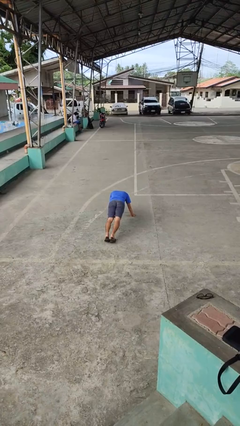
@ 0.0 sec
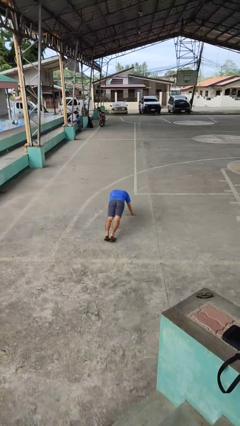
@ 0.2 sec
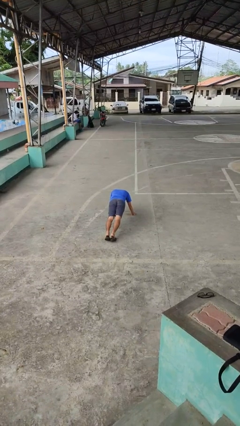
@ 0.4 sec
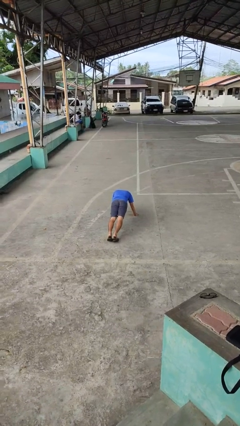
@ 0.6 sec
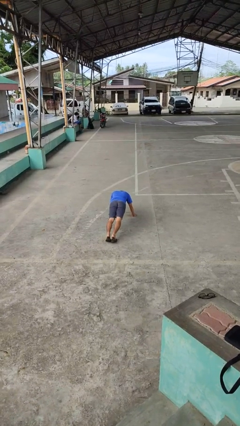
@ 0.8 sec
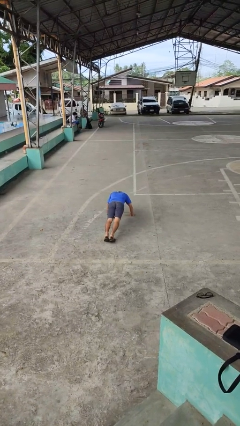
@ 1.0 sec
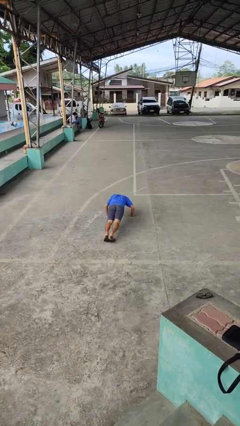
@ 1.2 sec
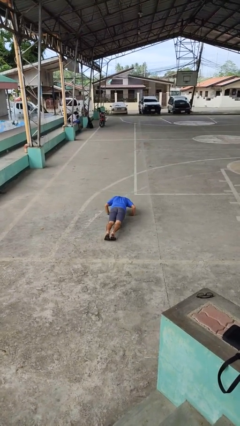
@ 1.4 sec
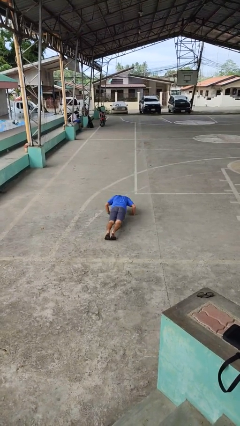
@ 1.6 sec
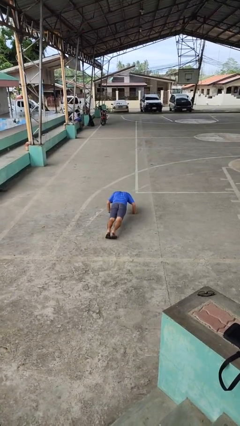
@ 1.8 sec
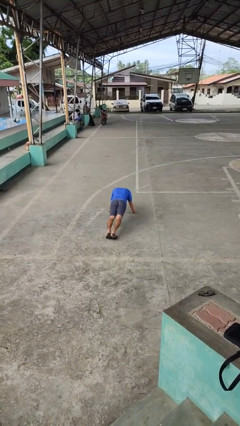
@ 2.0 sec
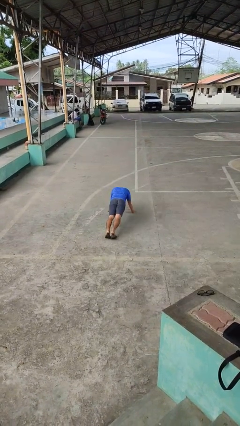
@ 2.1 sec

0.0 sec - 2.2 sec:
person exercises with pushup

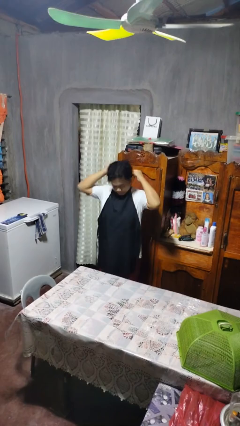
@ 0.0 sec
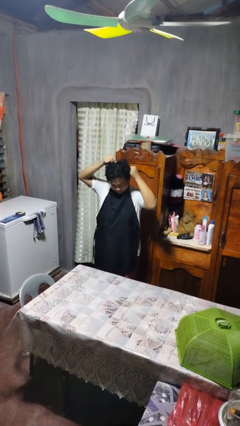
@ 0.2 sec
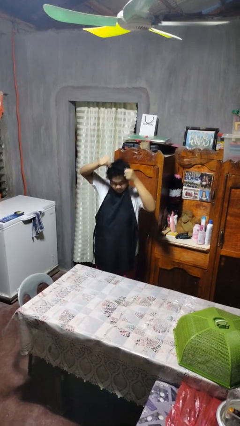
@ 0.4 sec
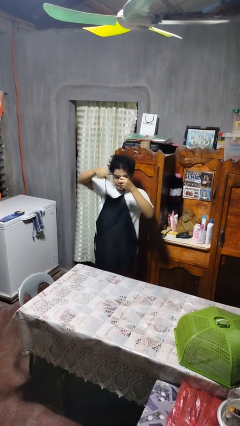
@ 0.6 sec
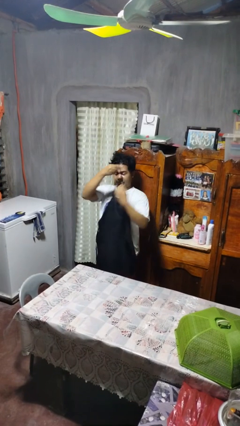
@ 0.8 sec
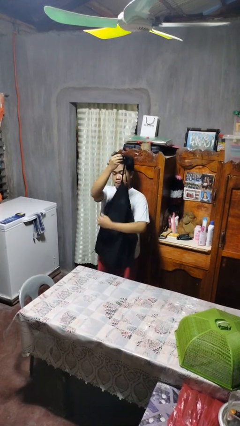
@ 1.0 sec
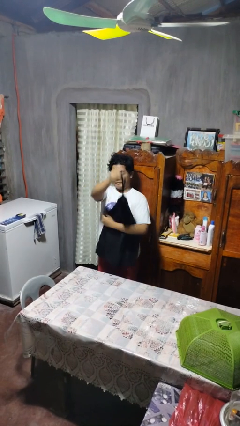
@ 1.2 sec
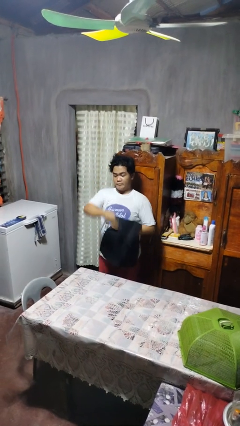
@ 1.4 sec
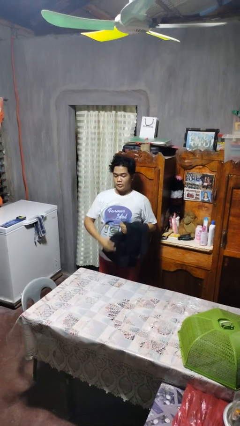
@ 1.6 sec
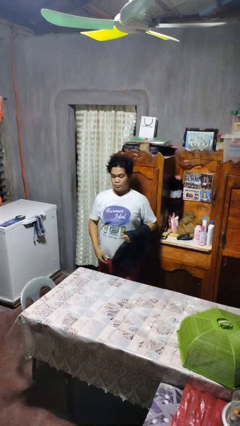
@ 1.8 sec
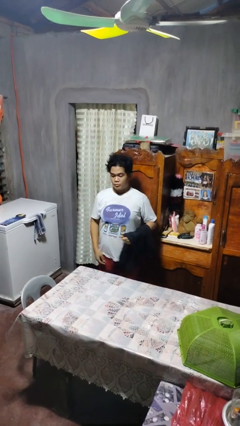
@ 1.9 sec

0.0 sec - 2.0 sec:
person takes off apron

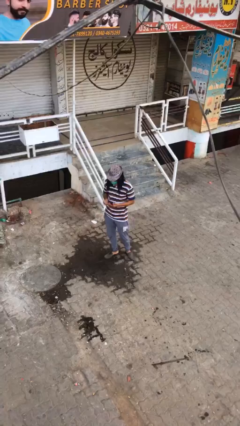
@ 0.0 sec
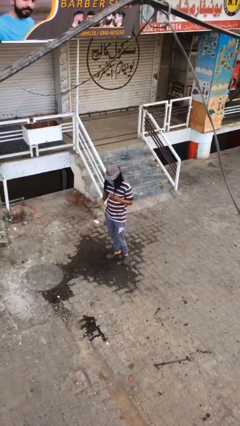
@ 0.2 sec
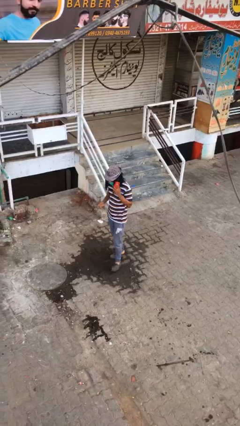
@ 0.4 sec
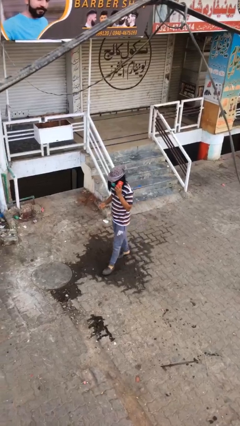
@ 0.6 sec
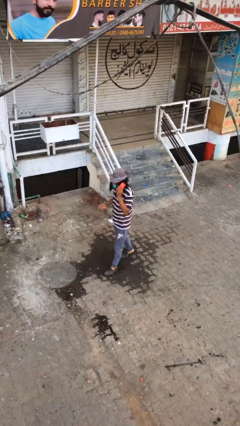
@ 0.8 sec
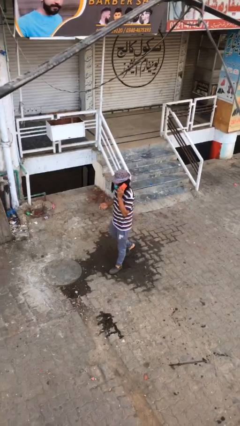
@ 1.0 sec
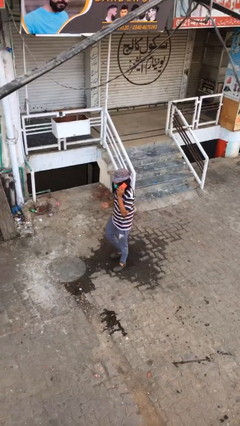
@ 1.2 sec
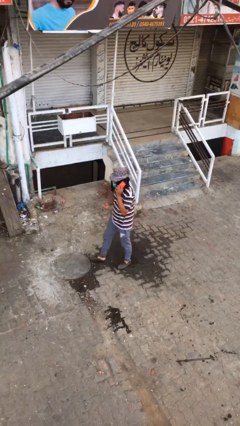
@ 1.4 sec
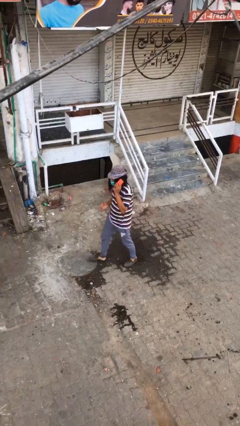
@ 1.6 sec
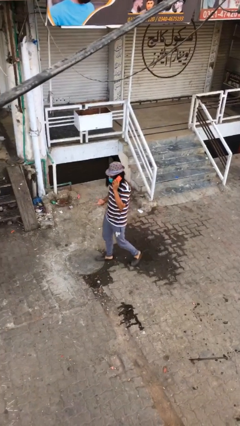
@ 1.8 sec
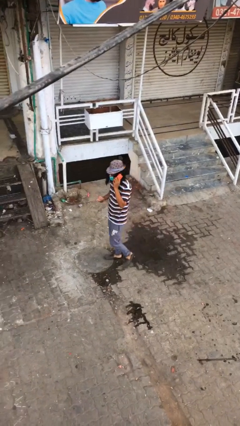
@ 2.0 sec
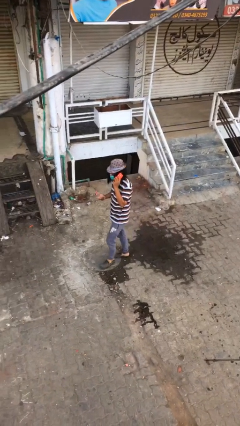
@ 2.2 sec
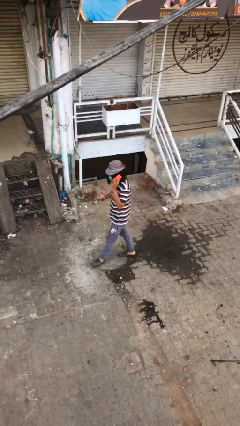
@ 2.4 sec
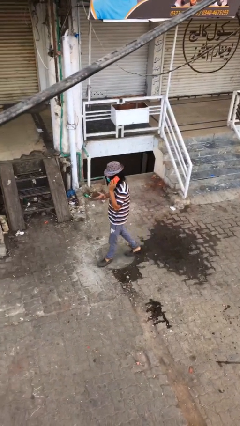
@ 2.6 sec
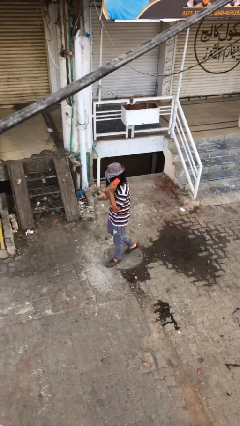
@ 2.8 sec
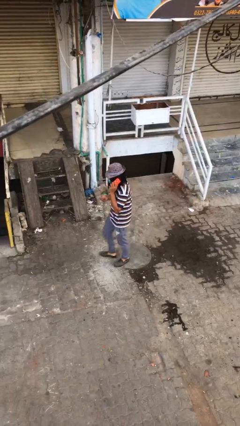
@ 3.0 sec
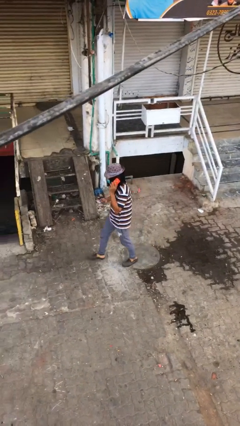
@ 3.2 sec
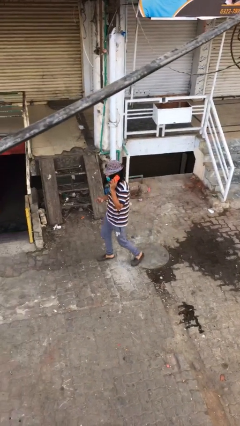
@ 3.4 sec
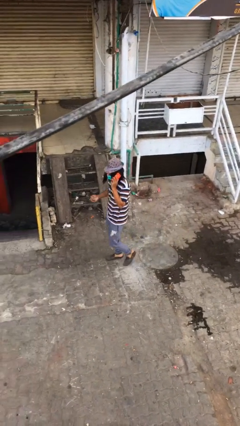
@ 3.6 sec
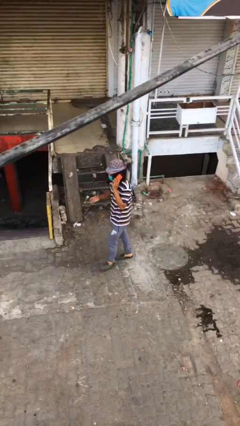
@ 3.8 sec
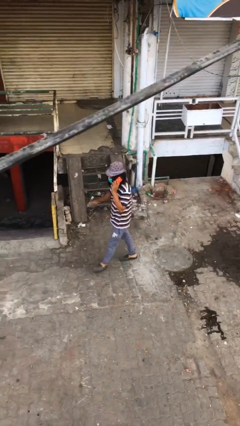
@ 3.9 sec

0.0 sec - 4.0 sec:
person talks on phone

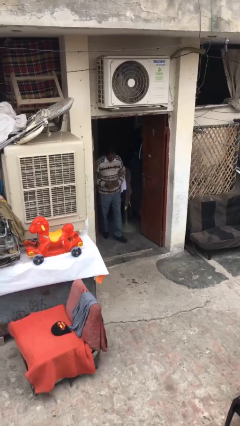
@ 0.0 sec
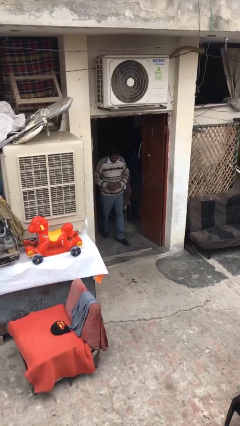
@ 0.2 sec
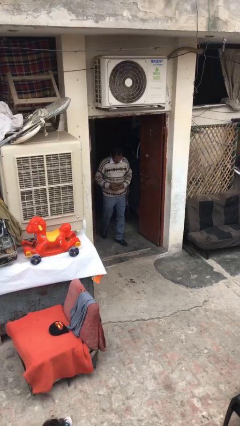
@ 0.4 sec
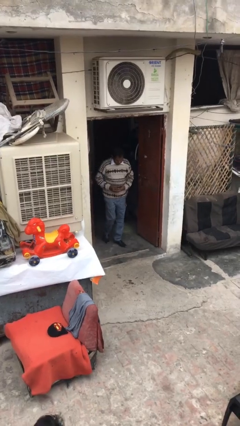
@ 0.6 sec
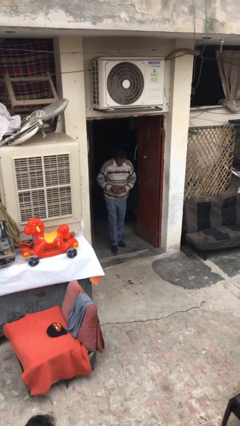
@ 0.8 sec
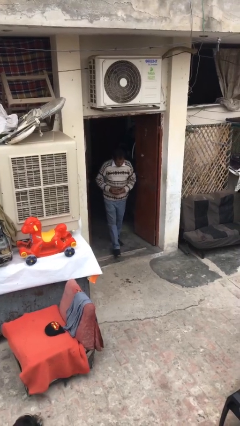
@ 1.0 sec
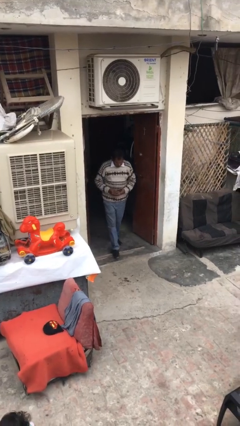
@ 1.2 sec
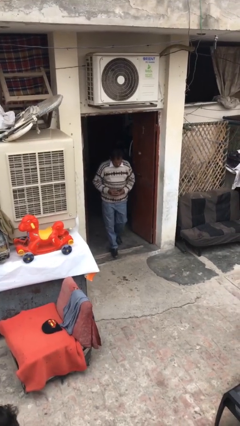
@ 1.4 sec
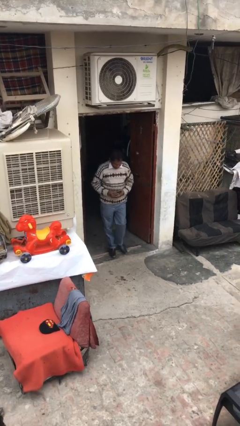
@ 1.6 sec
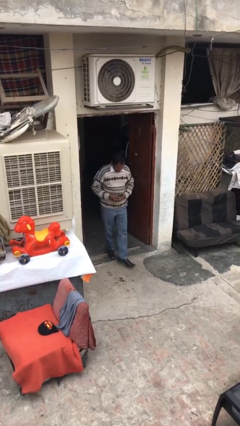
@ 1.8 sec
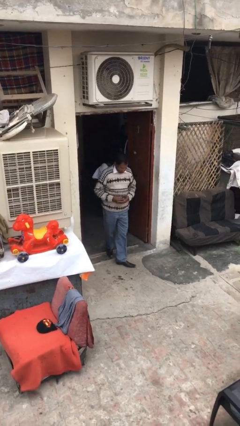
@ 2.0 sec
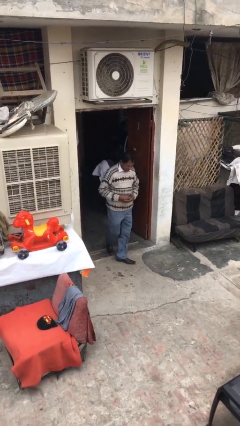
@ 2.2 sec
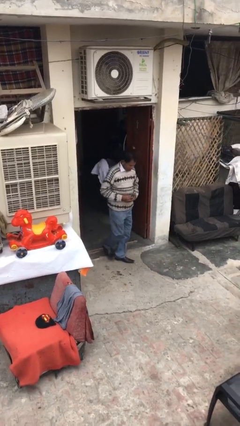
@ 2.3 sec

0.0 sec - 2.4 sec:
person enters scene through structure

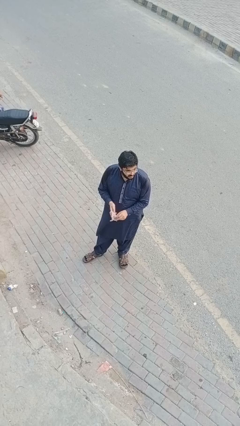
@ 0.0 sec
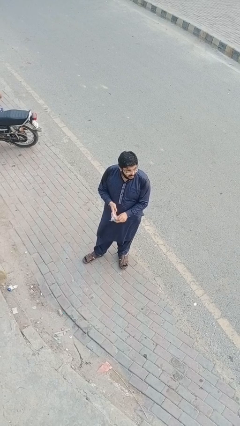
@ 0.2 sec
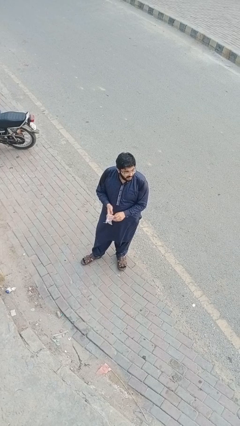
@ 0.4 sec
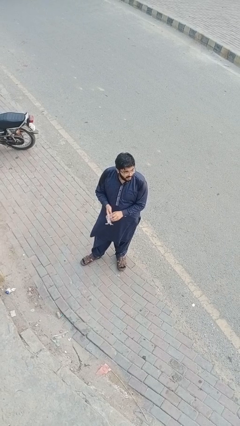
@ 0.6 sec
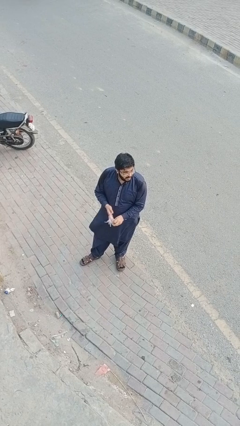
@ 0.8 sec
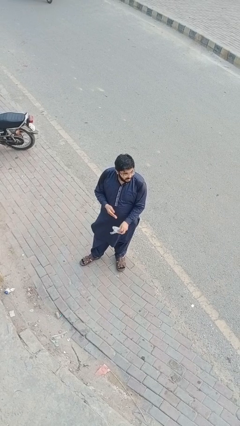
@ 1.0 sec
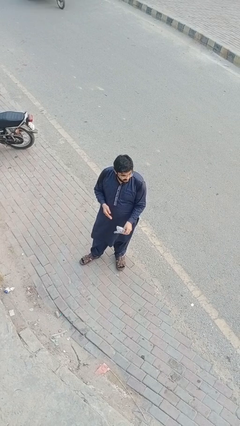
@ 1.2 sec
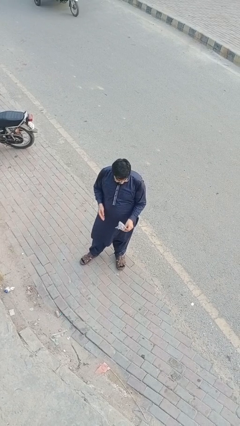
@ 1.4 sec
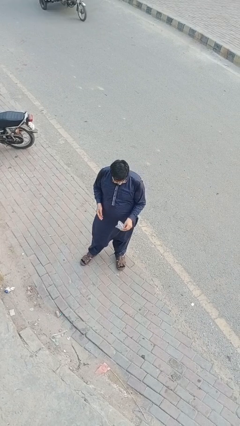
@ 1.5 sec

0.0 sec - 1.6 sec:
person takes off gloves

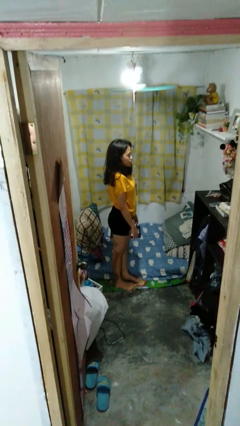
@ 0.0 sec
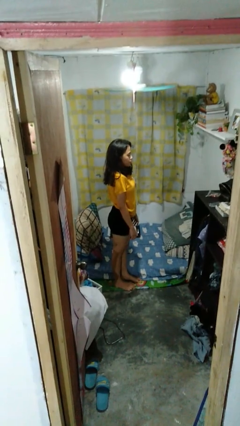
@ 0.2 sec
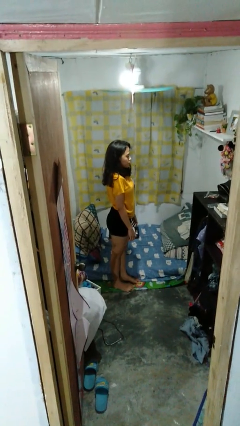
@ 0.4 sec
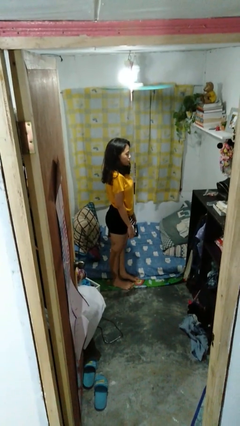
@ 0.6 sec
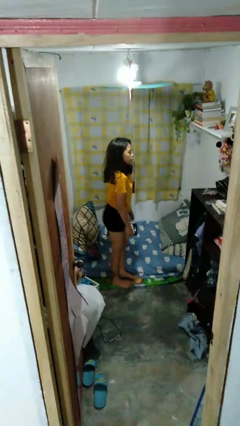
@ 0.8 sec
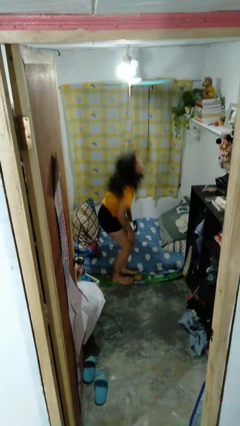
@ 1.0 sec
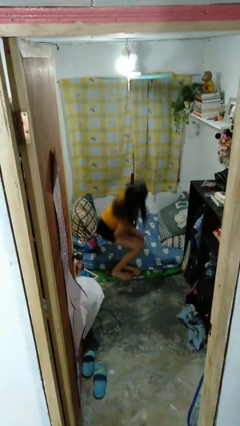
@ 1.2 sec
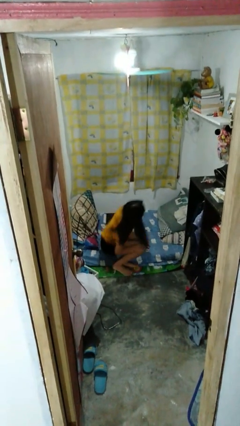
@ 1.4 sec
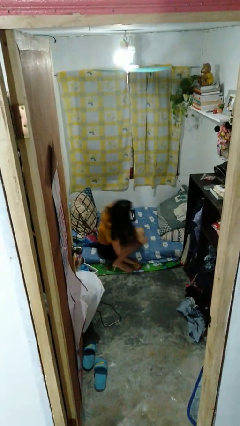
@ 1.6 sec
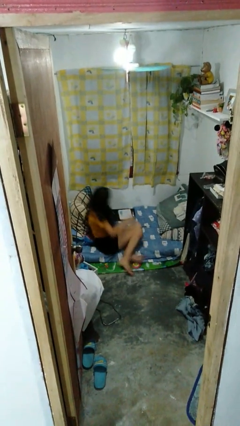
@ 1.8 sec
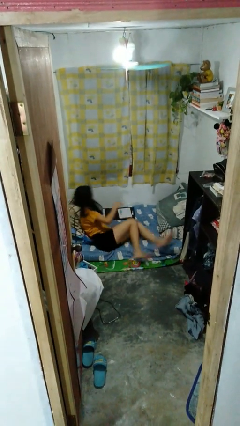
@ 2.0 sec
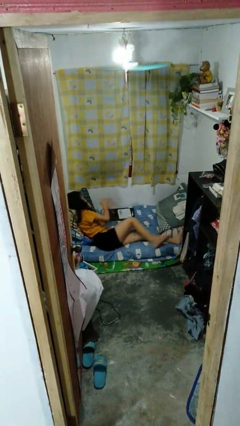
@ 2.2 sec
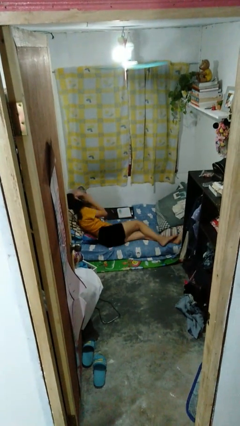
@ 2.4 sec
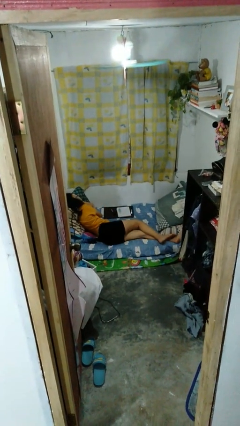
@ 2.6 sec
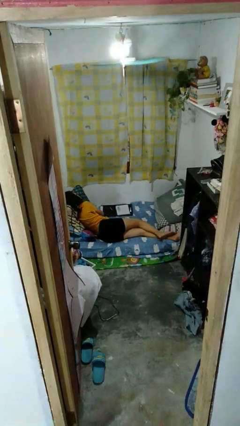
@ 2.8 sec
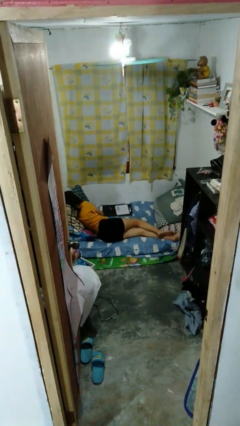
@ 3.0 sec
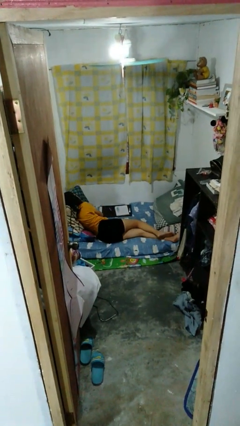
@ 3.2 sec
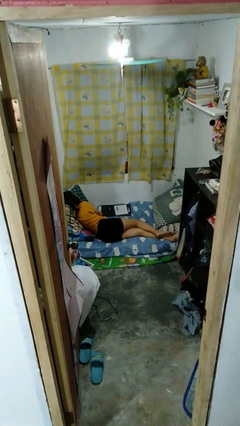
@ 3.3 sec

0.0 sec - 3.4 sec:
person lies down on bed

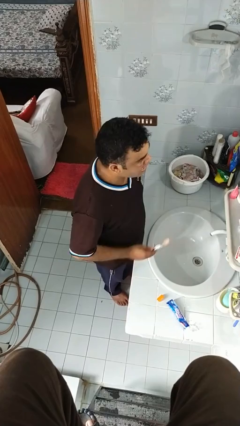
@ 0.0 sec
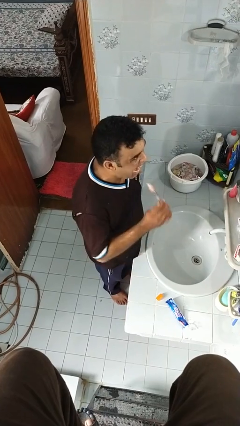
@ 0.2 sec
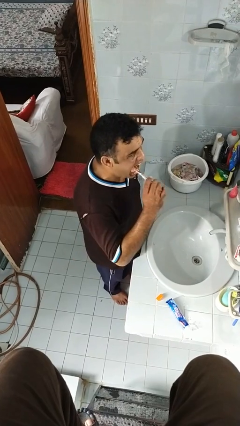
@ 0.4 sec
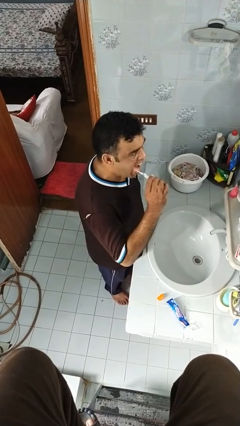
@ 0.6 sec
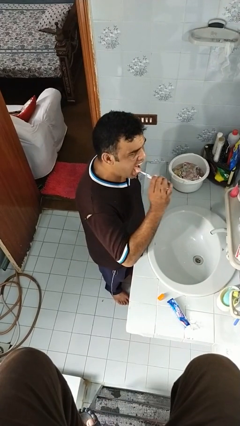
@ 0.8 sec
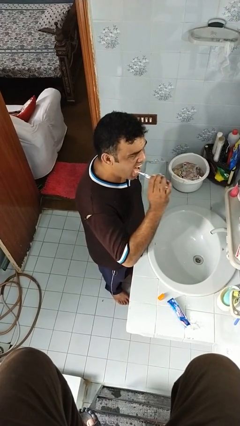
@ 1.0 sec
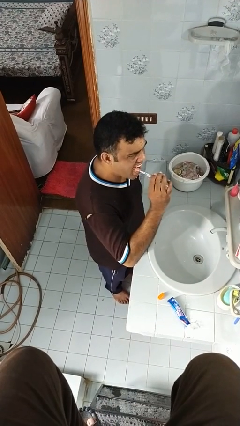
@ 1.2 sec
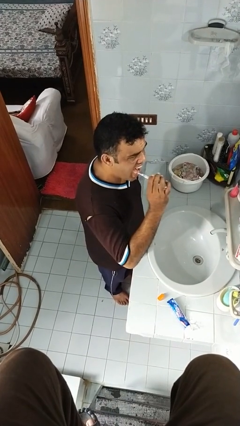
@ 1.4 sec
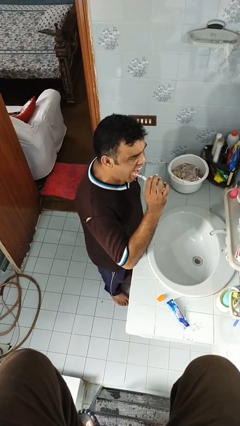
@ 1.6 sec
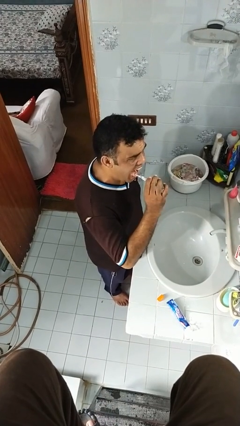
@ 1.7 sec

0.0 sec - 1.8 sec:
person brushes teeth
